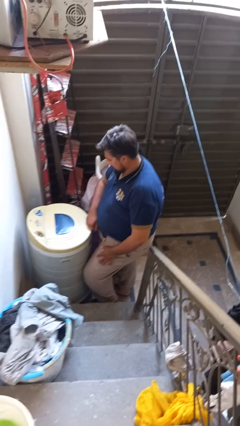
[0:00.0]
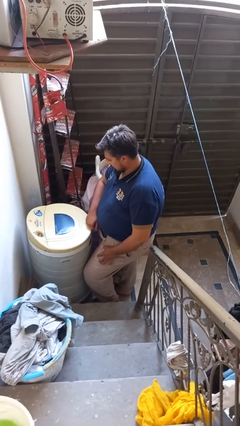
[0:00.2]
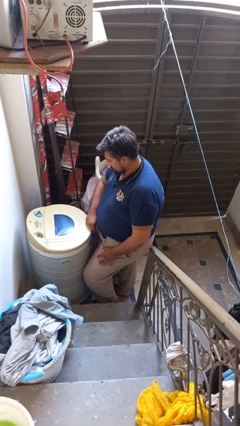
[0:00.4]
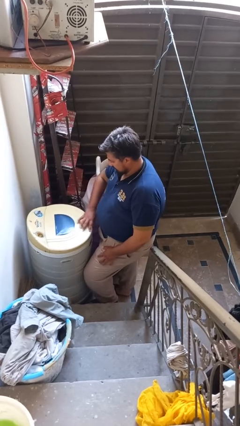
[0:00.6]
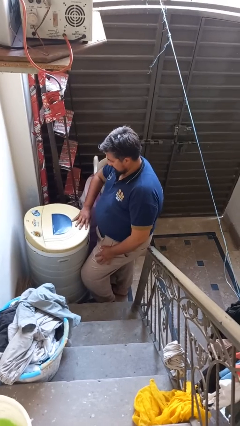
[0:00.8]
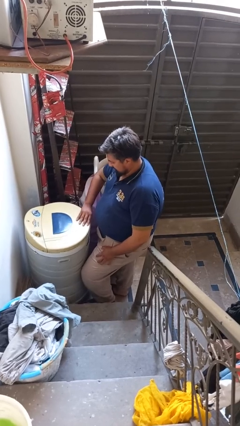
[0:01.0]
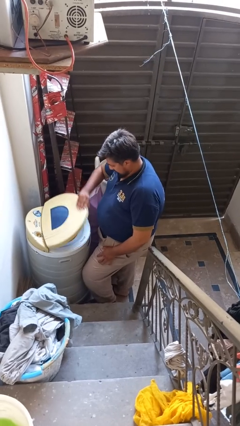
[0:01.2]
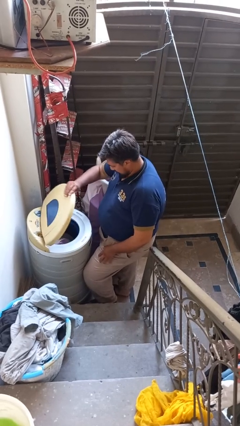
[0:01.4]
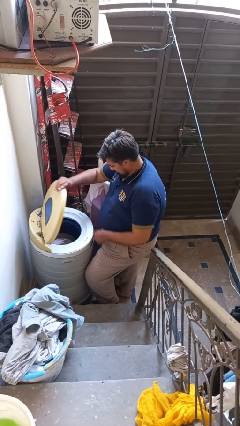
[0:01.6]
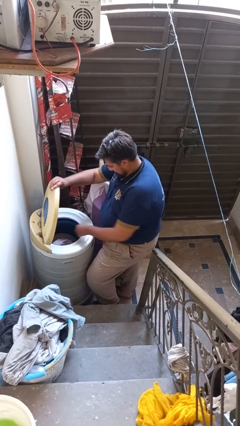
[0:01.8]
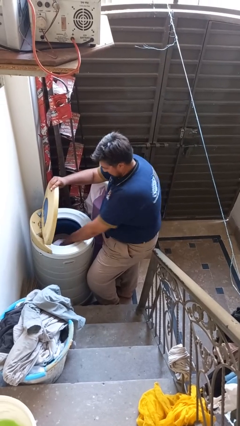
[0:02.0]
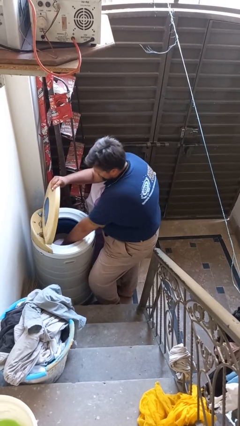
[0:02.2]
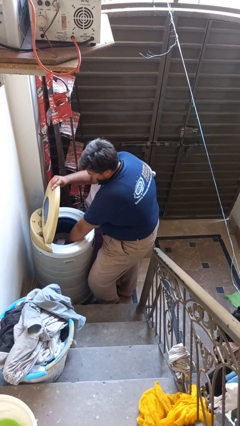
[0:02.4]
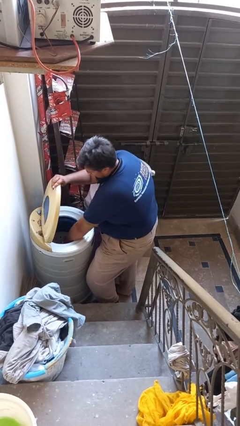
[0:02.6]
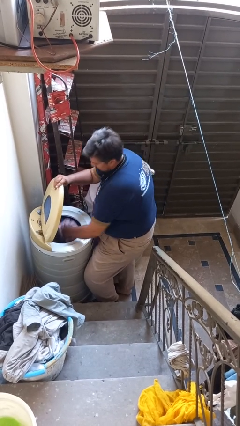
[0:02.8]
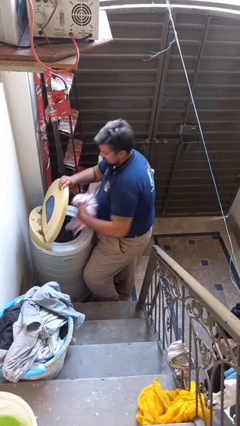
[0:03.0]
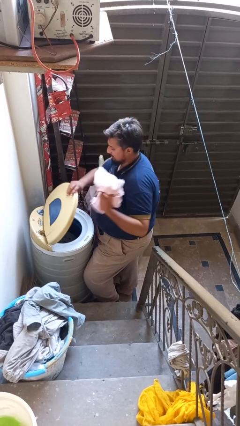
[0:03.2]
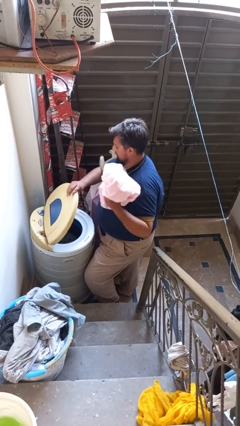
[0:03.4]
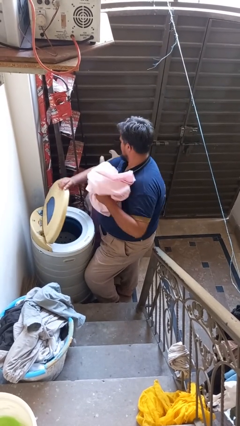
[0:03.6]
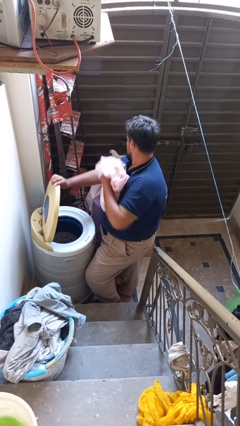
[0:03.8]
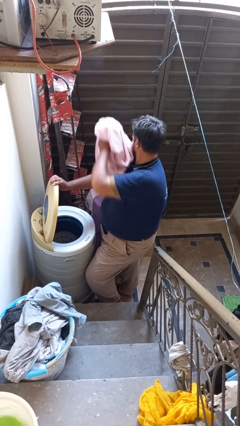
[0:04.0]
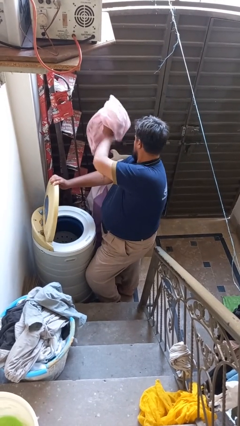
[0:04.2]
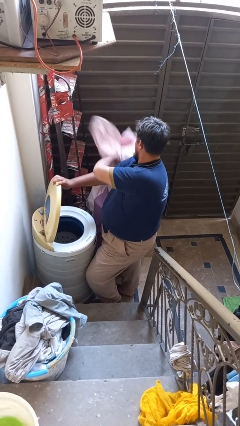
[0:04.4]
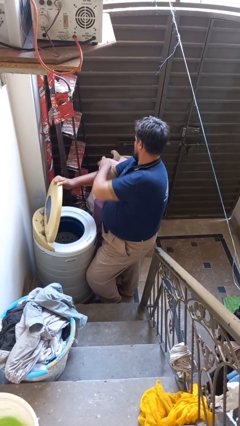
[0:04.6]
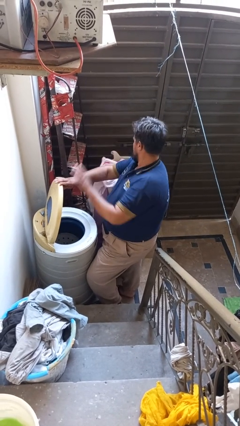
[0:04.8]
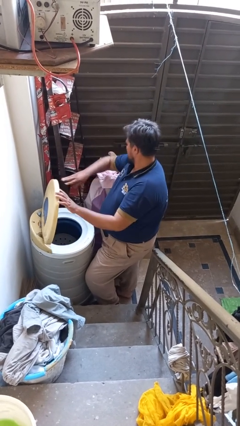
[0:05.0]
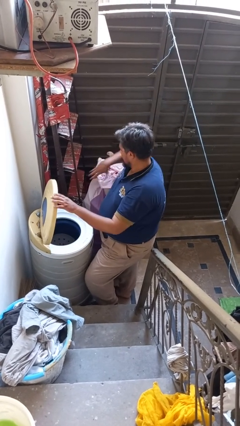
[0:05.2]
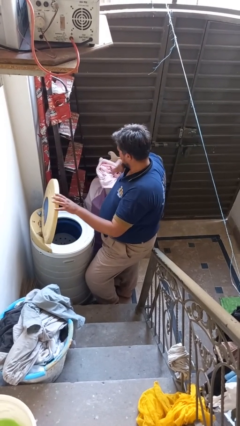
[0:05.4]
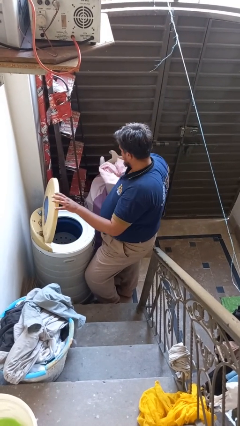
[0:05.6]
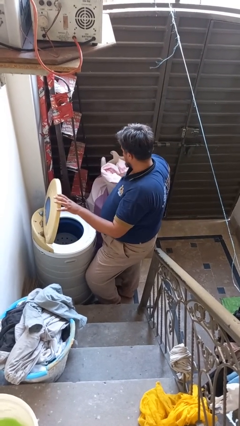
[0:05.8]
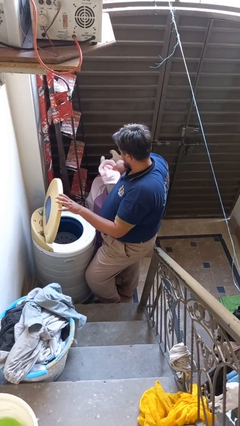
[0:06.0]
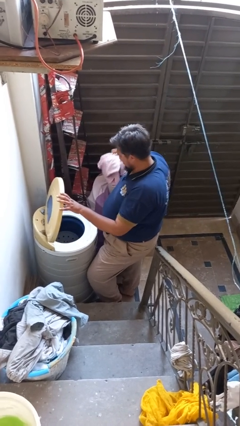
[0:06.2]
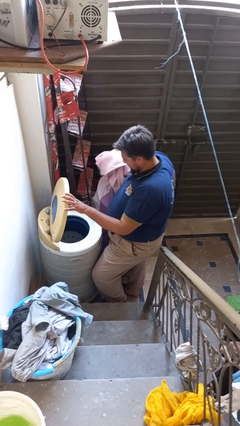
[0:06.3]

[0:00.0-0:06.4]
person unloads dryer

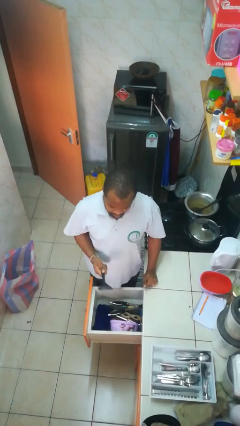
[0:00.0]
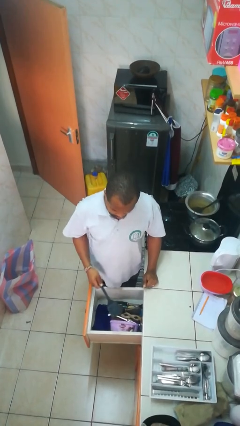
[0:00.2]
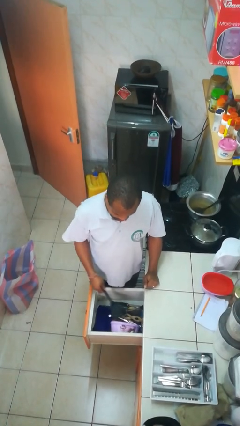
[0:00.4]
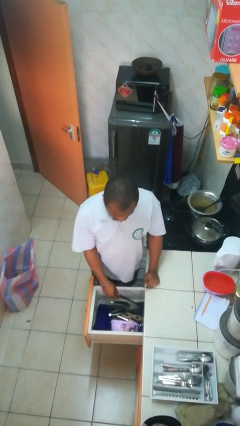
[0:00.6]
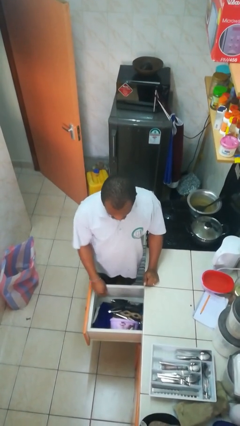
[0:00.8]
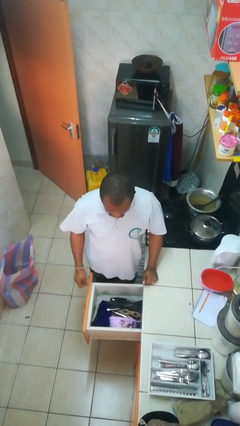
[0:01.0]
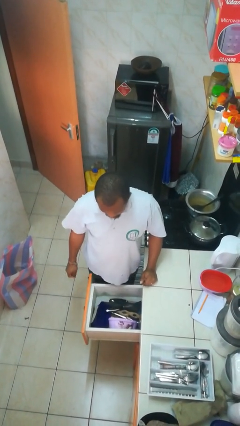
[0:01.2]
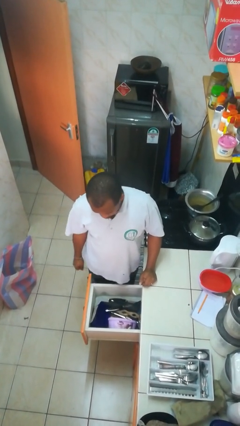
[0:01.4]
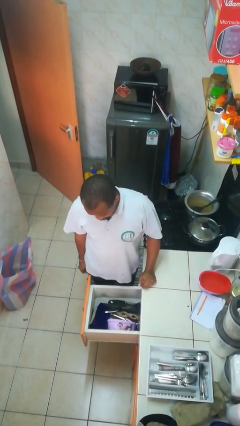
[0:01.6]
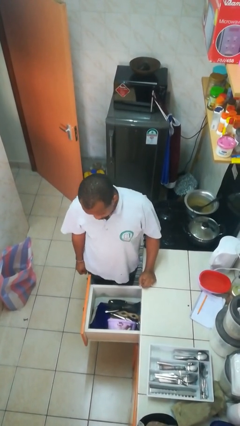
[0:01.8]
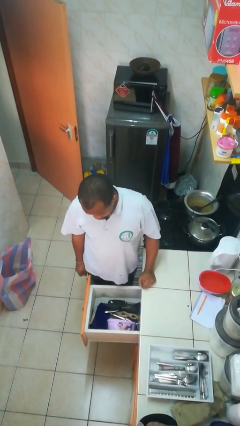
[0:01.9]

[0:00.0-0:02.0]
person puts object into kitchen drawer

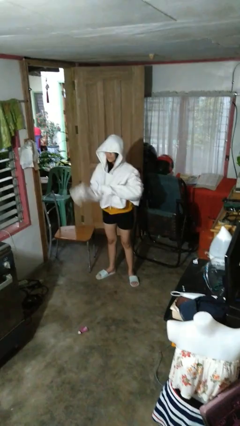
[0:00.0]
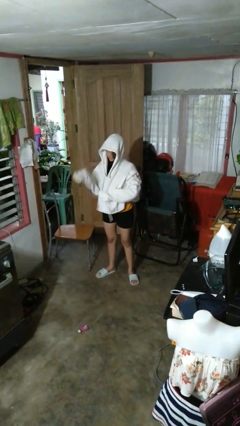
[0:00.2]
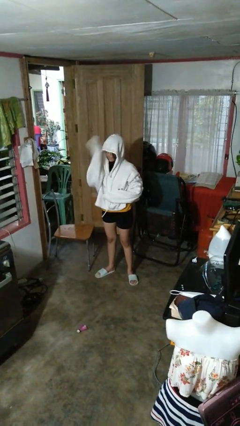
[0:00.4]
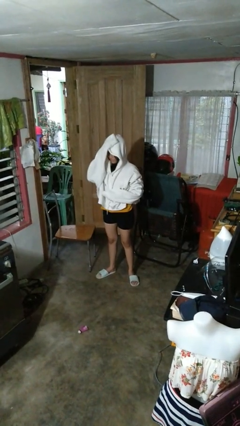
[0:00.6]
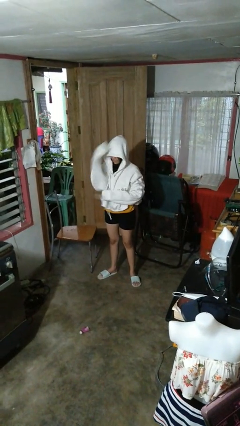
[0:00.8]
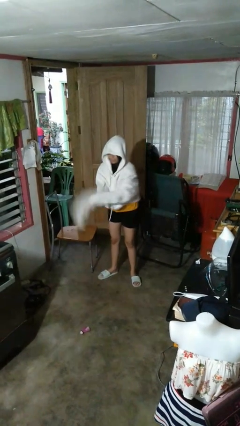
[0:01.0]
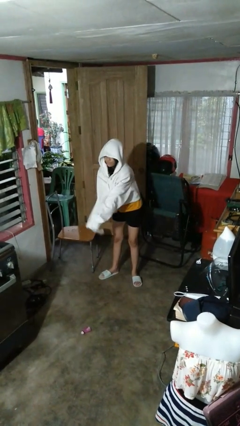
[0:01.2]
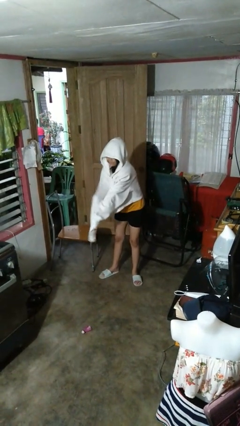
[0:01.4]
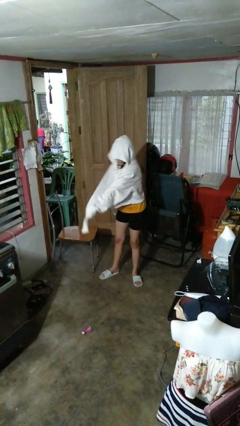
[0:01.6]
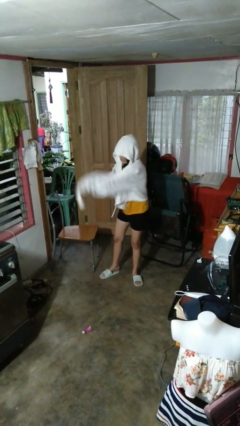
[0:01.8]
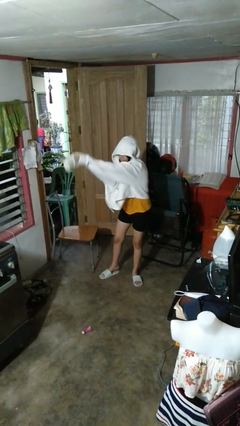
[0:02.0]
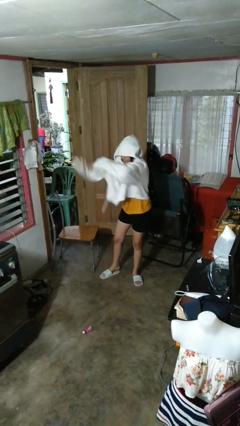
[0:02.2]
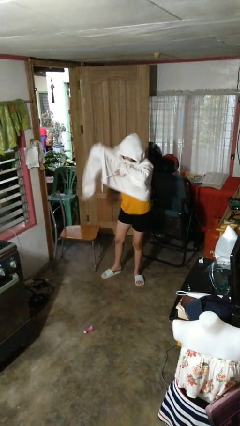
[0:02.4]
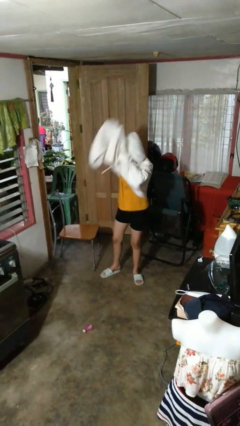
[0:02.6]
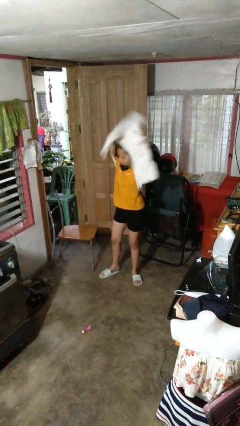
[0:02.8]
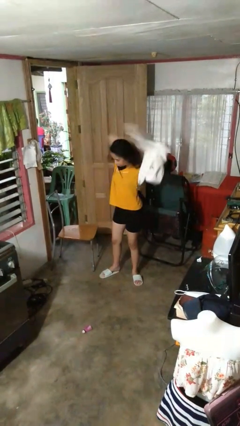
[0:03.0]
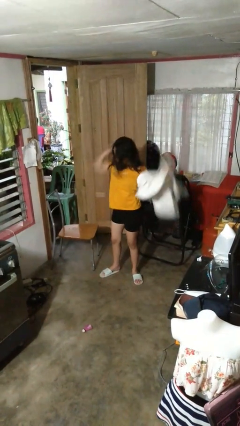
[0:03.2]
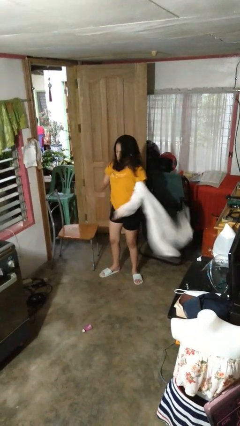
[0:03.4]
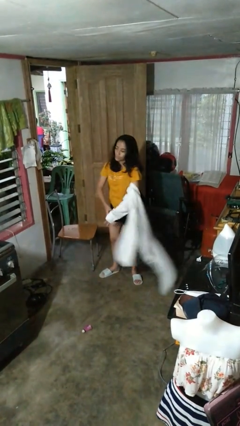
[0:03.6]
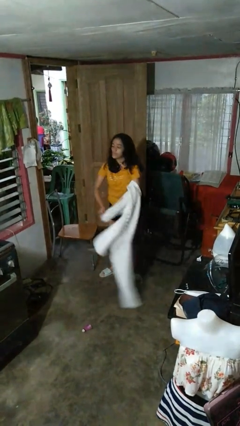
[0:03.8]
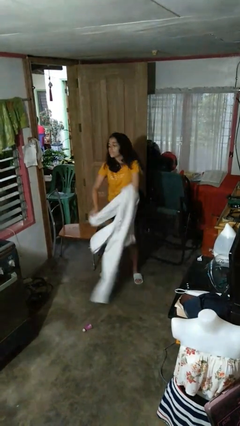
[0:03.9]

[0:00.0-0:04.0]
person takes off hoodie

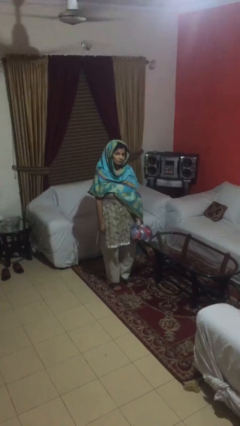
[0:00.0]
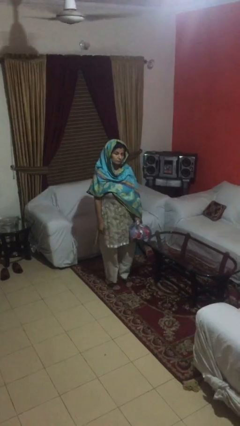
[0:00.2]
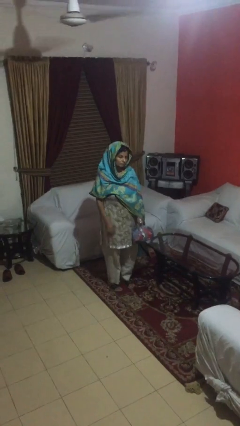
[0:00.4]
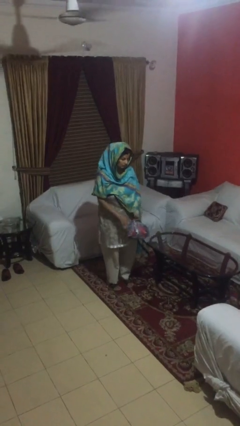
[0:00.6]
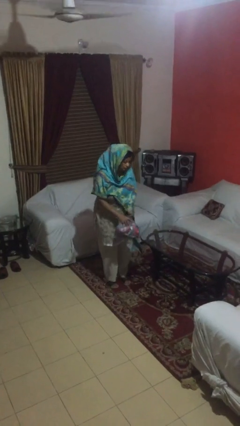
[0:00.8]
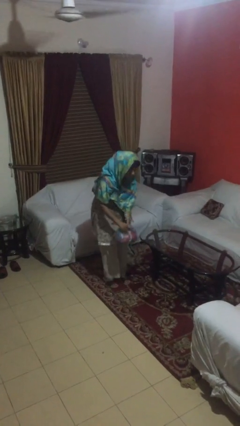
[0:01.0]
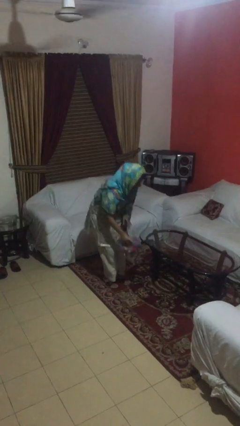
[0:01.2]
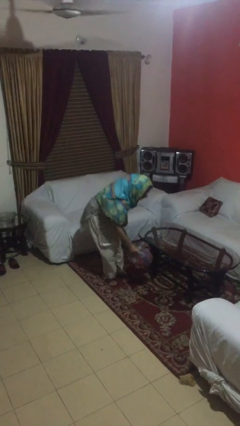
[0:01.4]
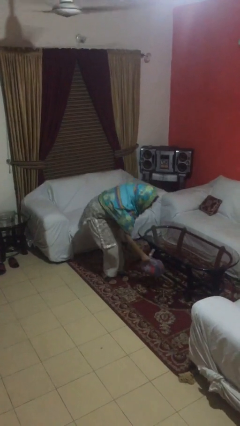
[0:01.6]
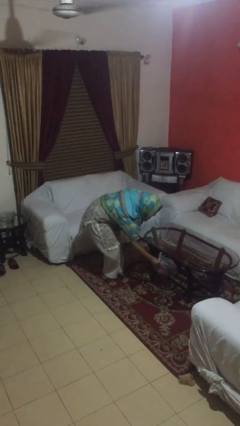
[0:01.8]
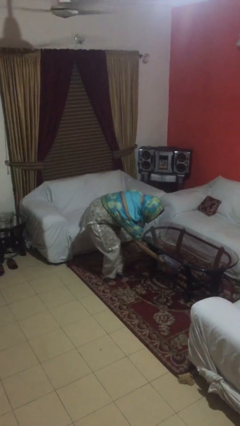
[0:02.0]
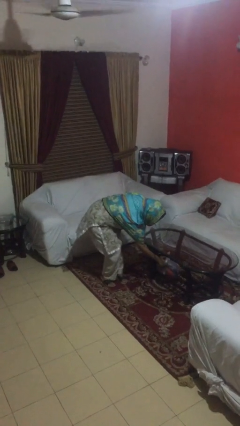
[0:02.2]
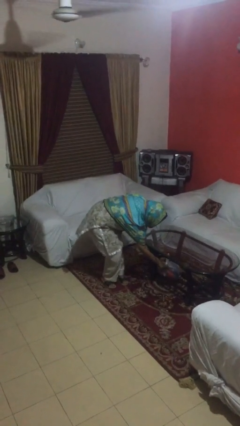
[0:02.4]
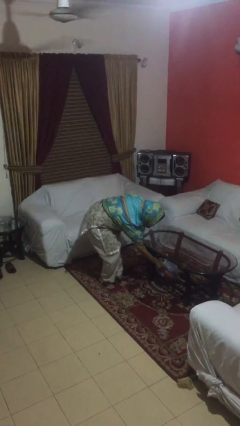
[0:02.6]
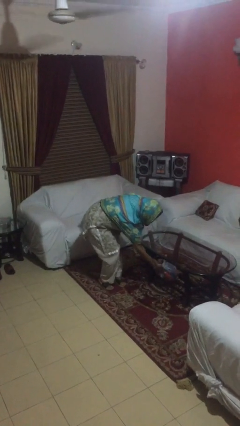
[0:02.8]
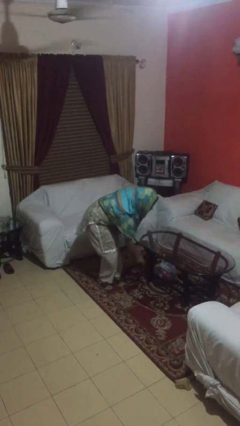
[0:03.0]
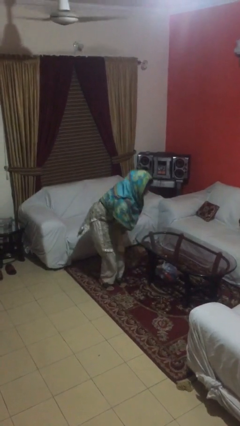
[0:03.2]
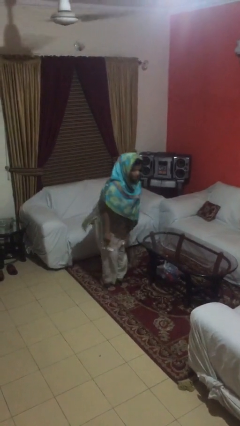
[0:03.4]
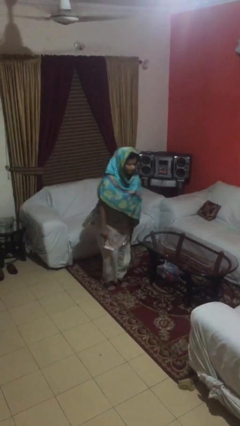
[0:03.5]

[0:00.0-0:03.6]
person puts down object on table

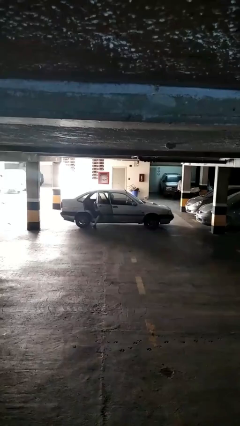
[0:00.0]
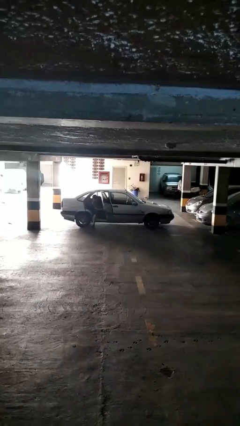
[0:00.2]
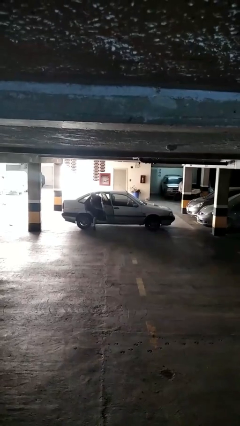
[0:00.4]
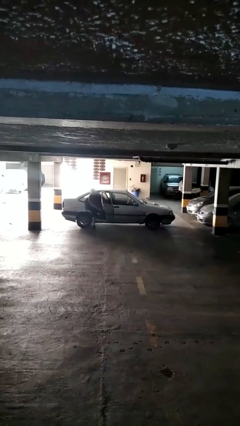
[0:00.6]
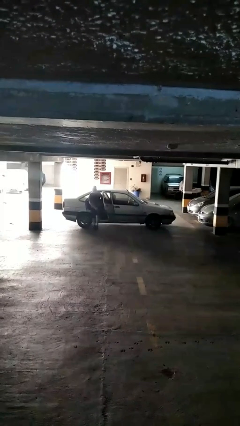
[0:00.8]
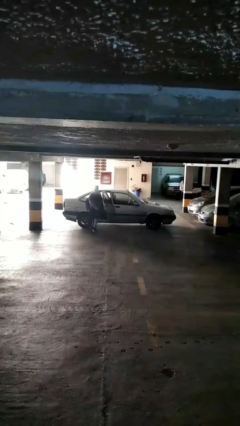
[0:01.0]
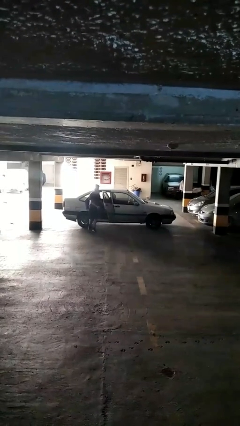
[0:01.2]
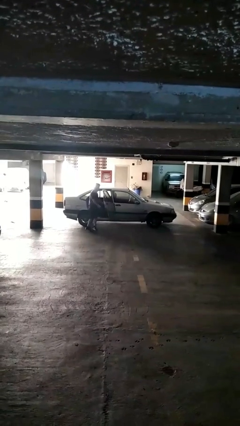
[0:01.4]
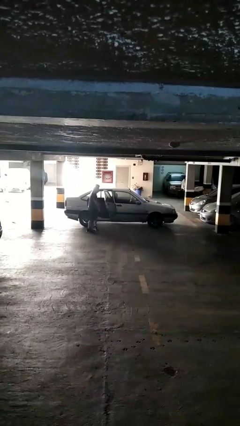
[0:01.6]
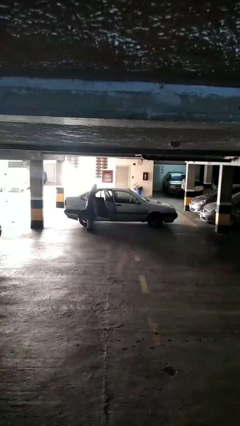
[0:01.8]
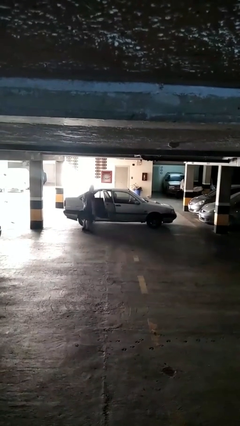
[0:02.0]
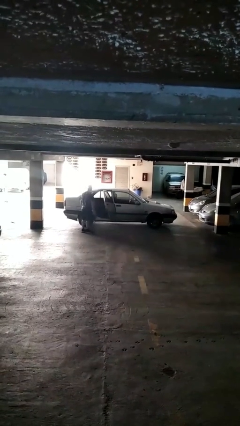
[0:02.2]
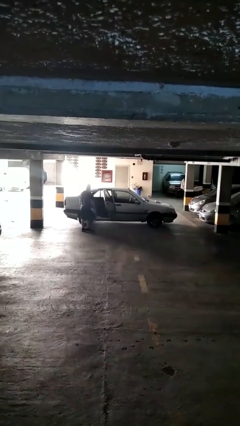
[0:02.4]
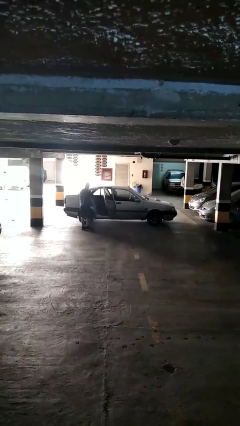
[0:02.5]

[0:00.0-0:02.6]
car drops off person
